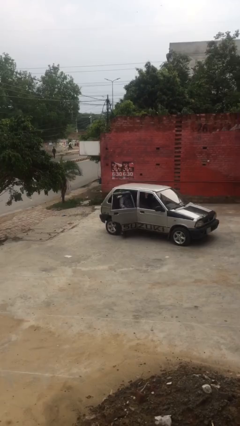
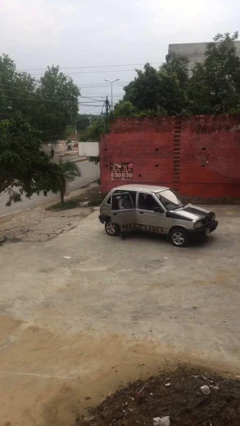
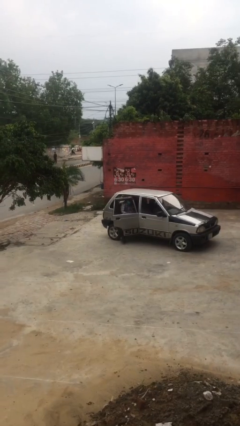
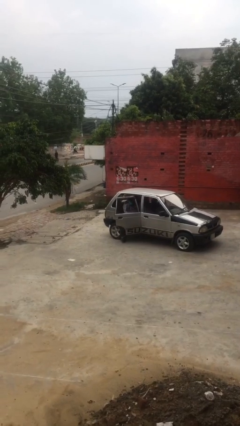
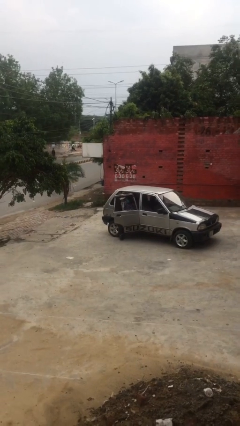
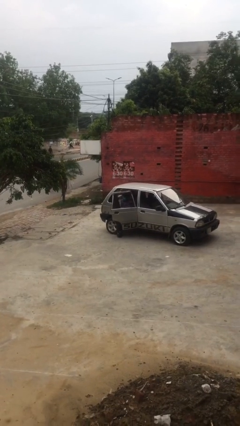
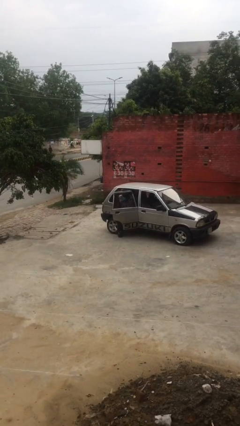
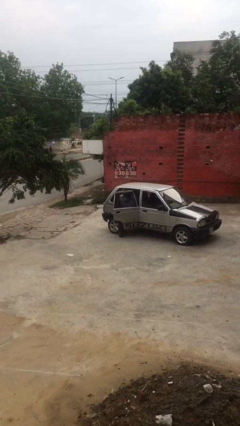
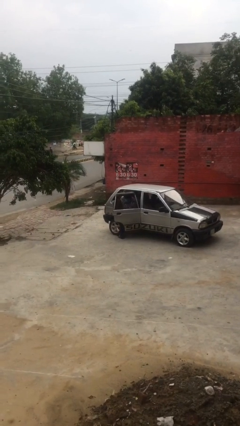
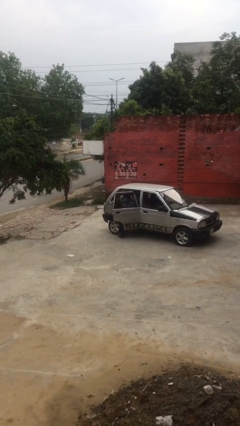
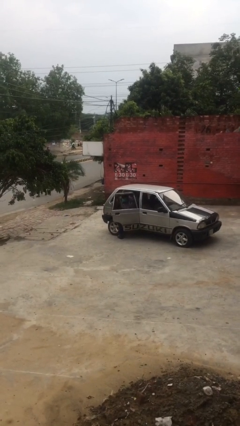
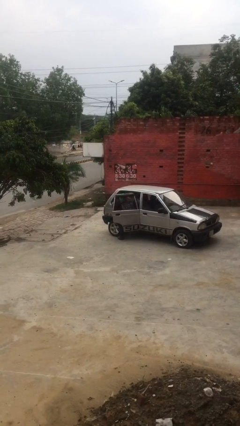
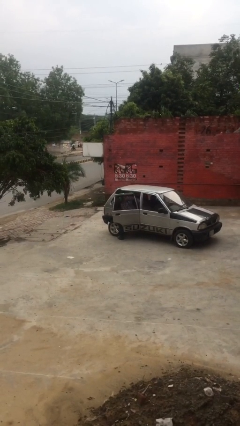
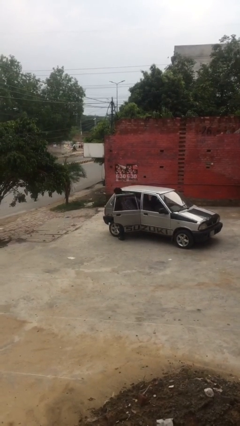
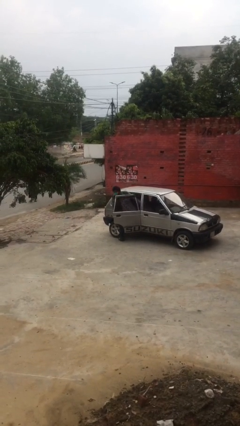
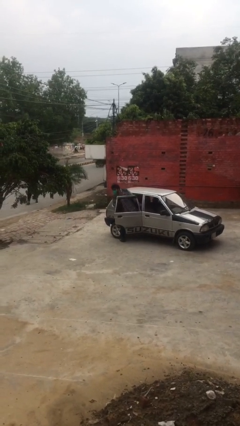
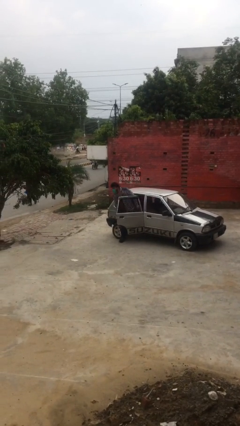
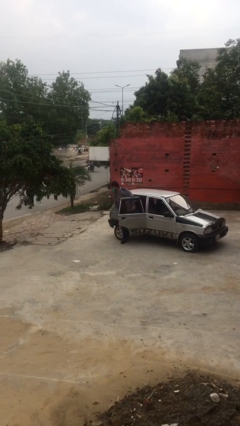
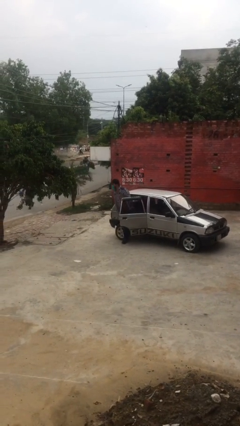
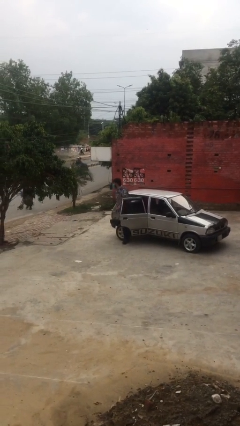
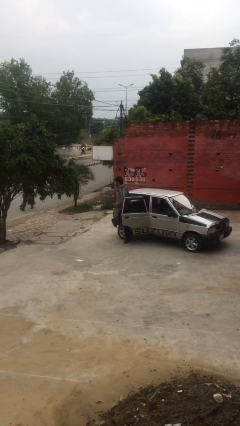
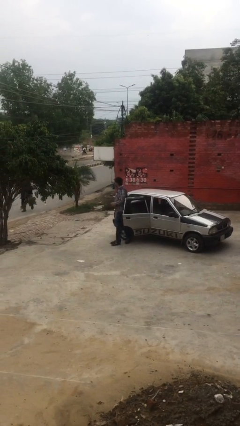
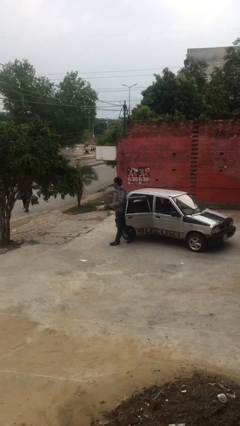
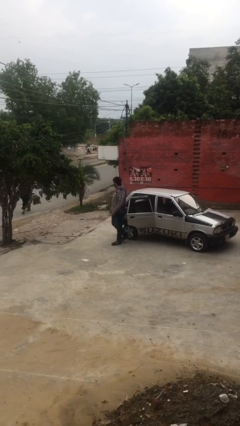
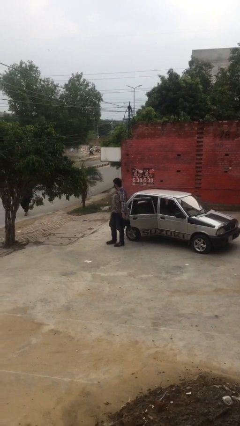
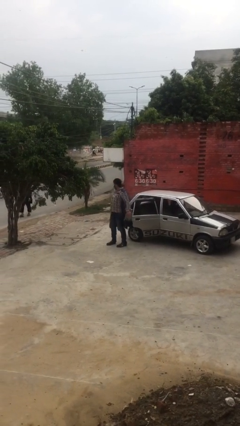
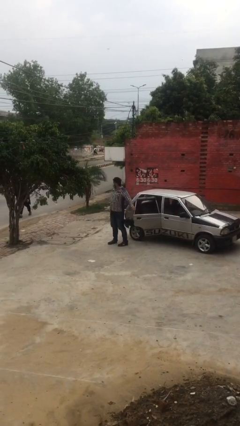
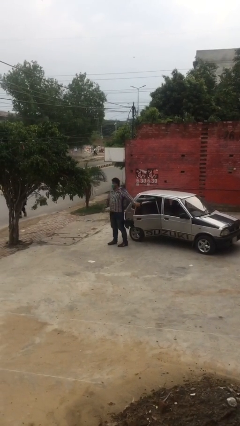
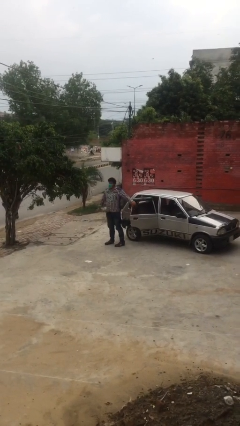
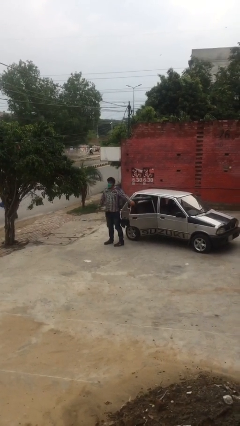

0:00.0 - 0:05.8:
person exits car

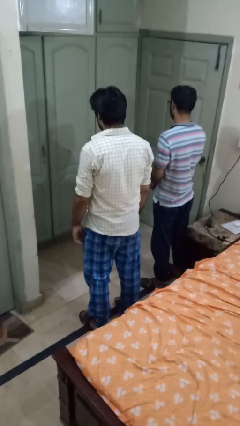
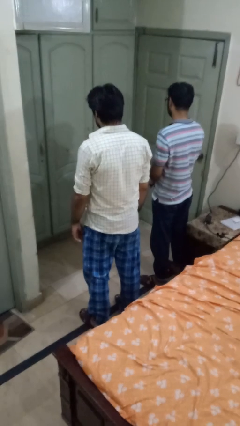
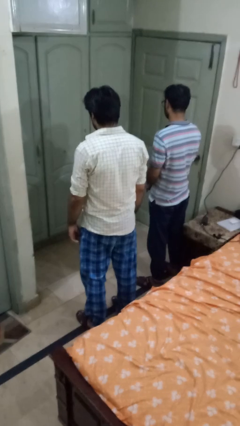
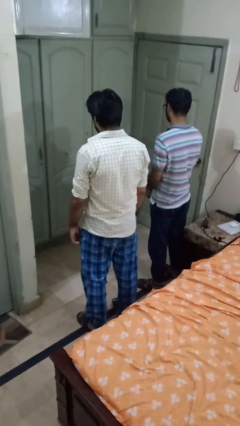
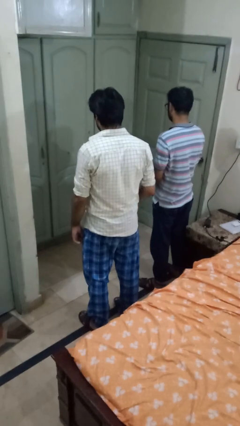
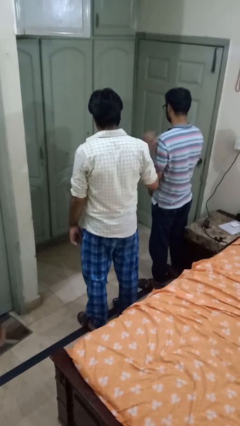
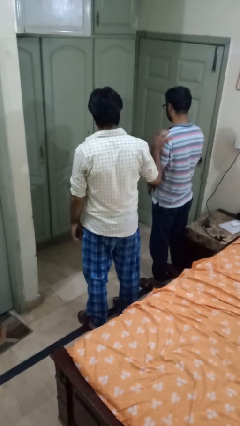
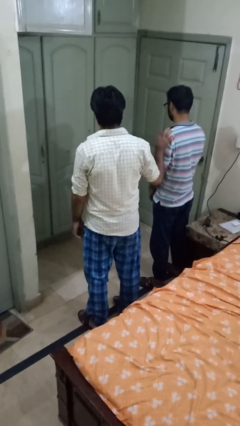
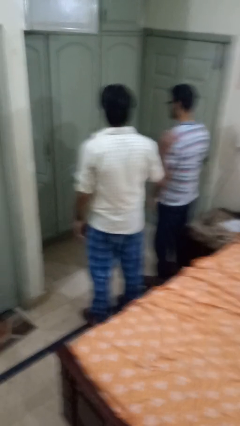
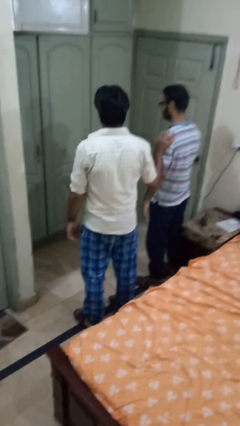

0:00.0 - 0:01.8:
person grabs person by shoulder

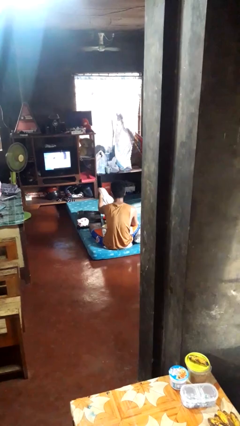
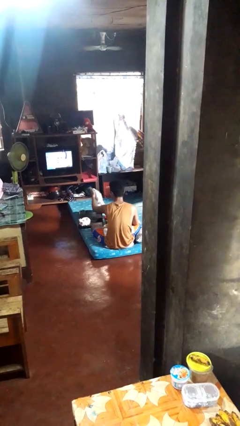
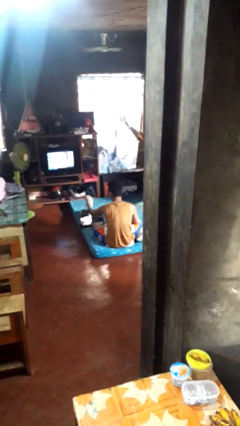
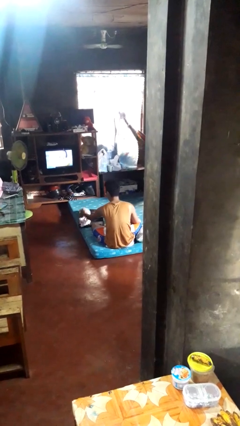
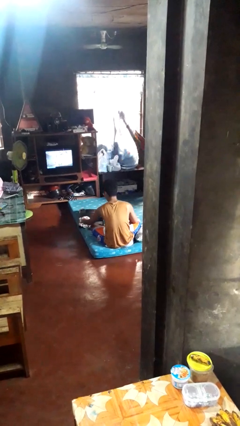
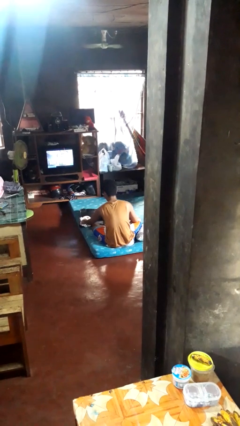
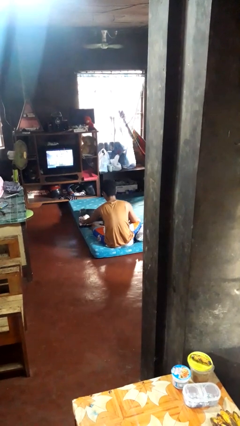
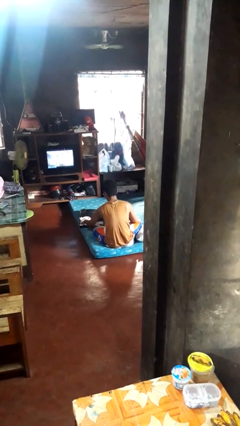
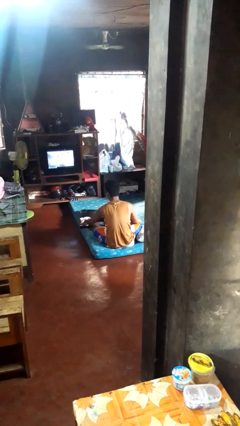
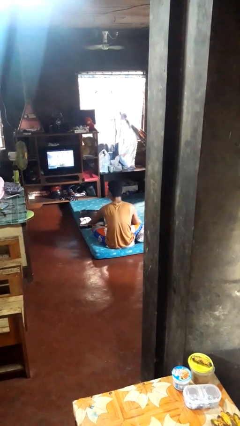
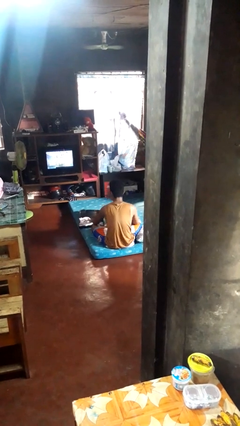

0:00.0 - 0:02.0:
person loads clothes into suitcase

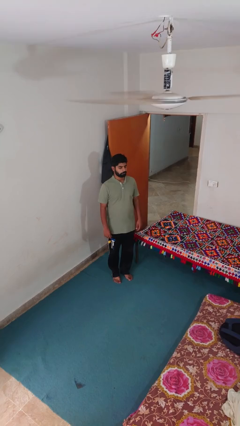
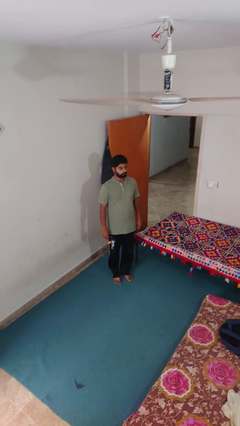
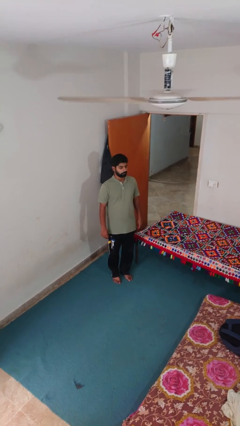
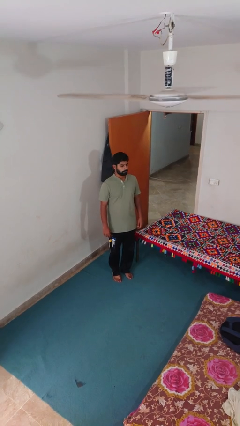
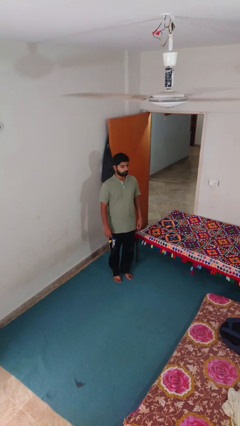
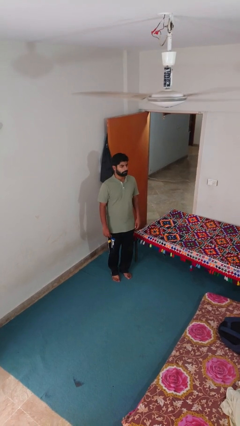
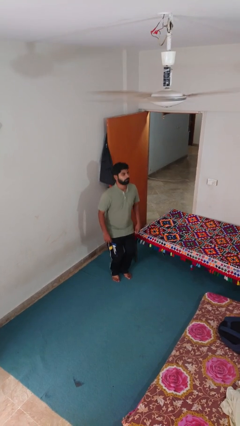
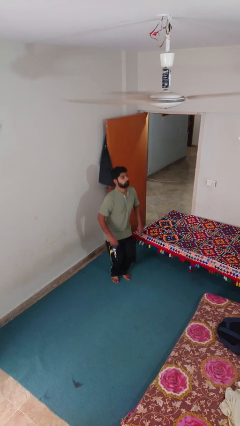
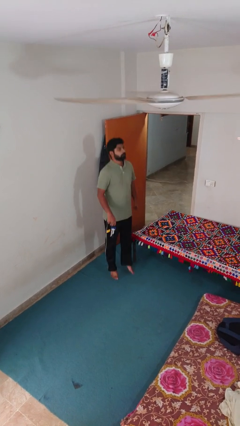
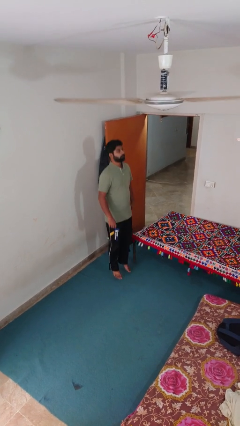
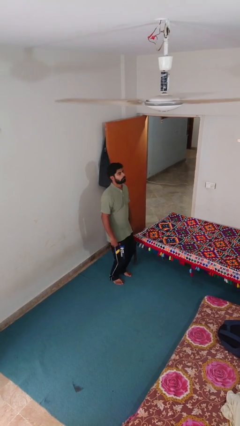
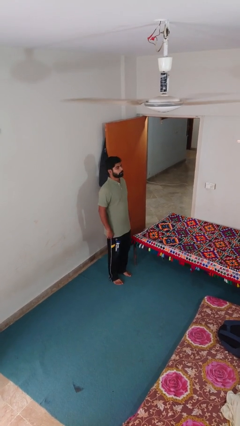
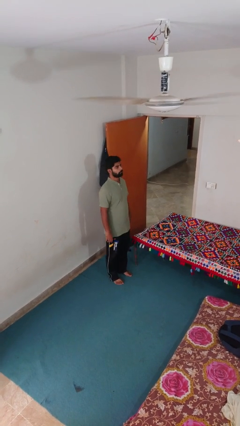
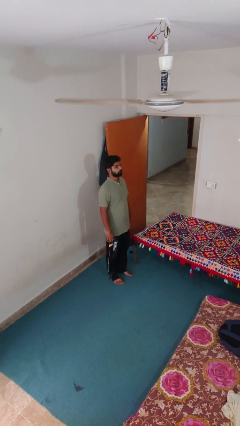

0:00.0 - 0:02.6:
person jumps

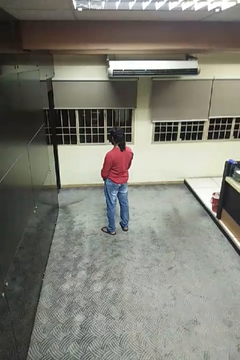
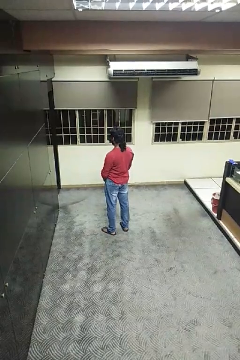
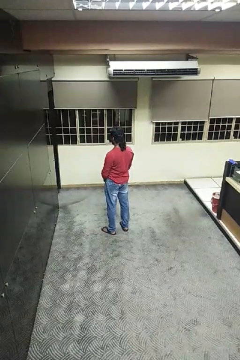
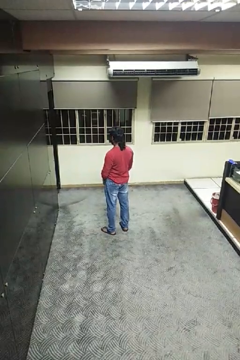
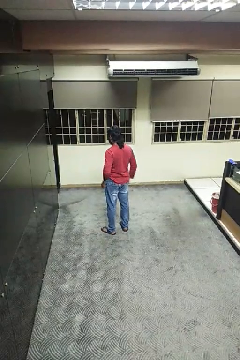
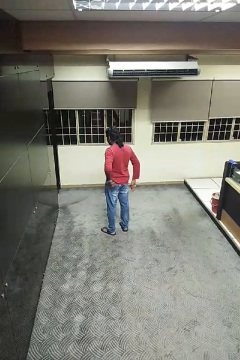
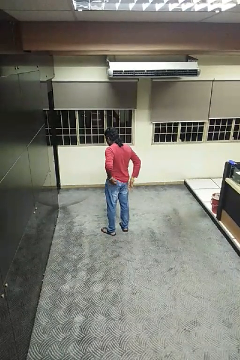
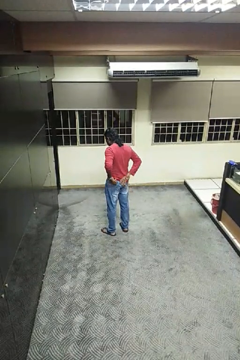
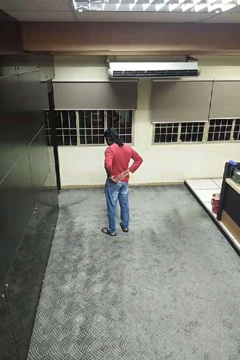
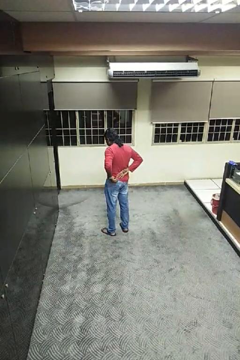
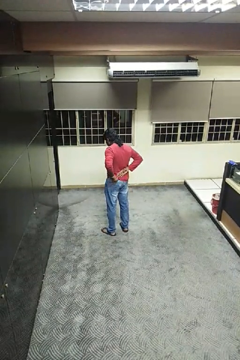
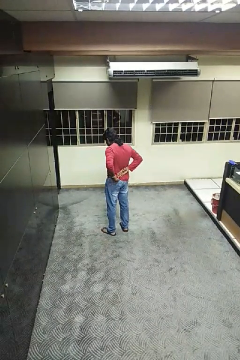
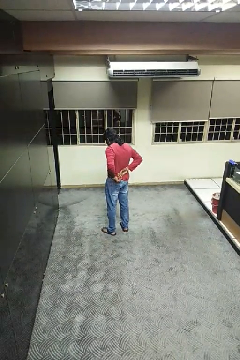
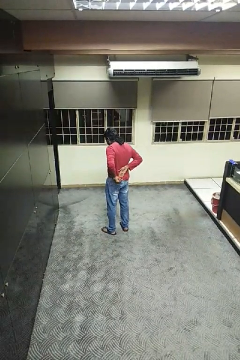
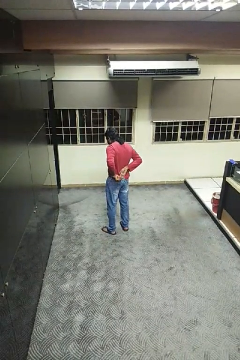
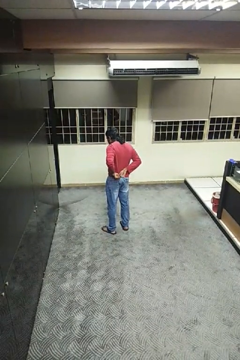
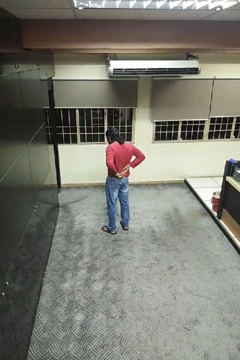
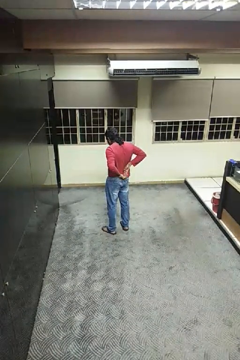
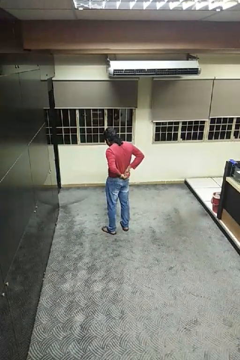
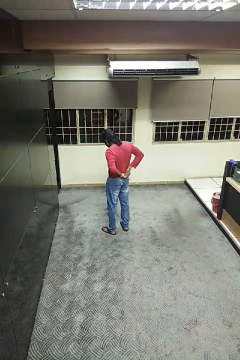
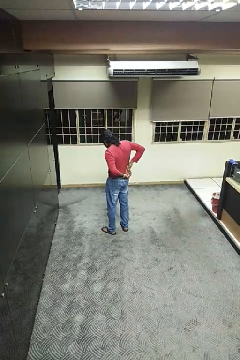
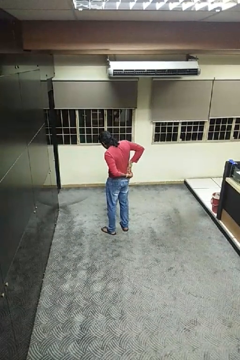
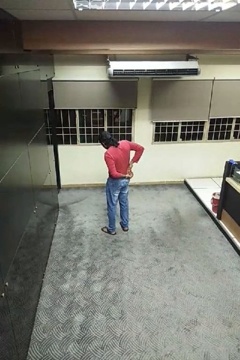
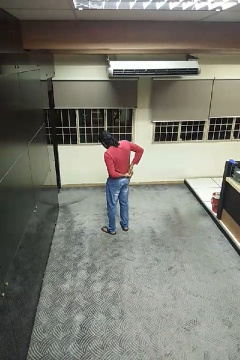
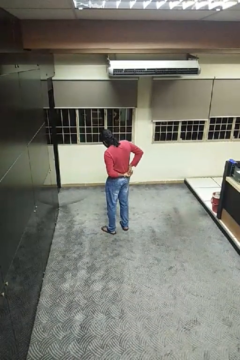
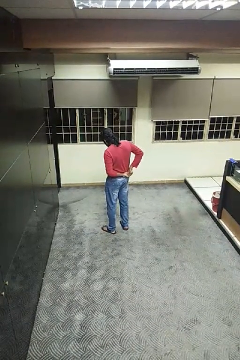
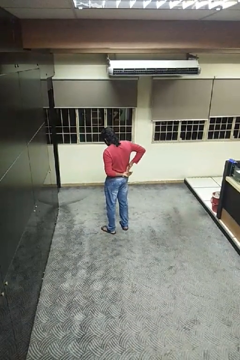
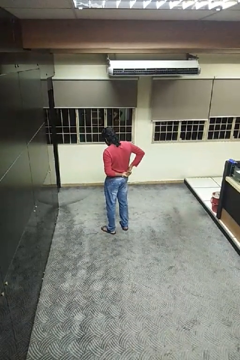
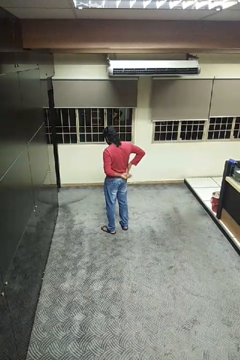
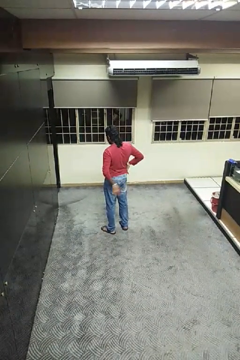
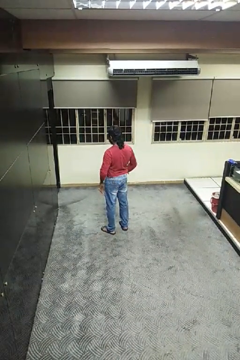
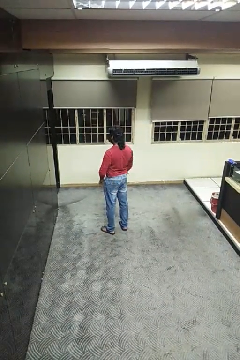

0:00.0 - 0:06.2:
person tucks in shirt

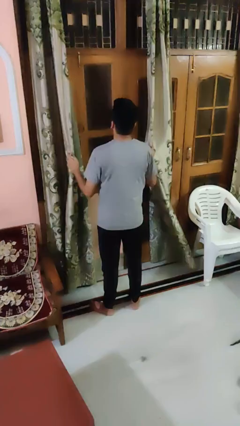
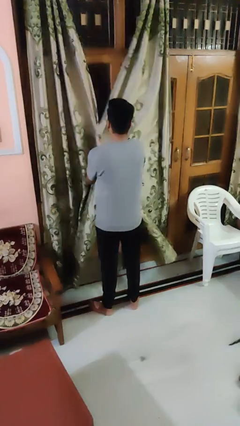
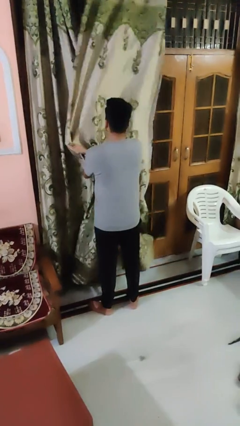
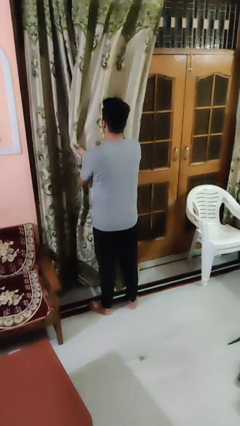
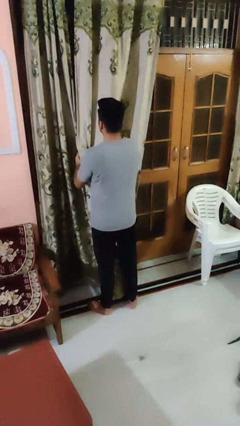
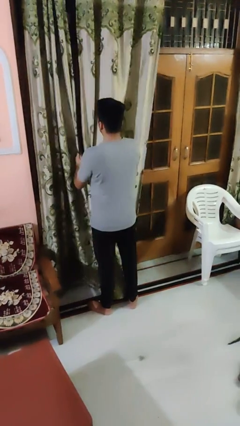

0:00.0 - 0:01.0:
person closes curtains
